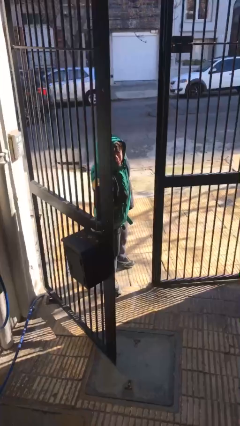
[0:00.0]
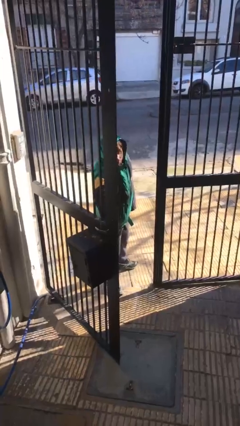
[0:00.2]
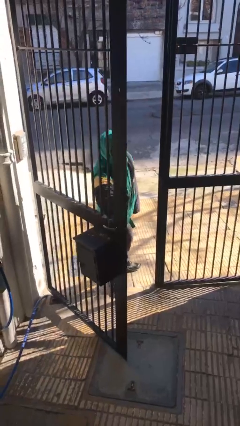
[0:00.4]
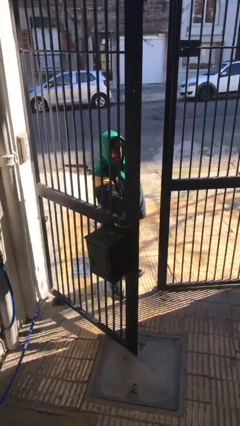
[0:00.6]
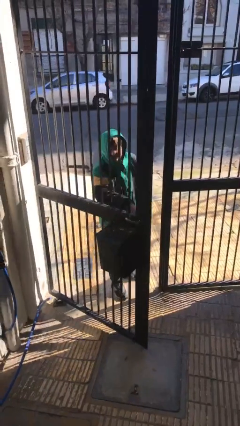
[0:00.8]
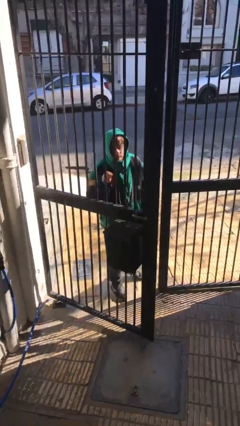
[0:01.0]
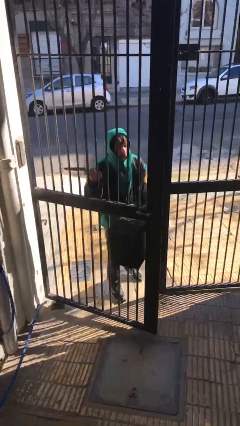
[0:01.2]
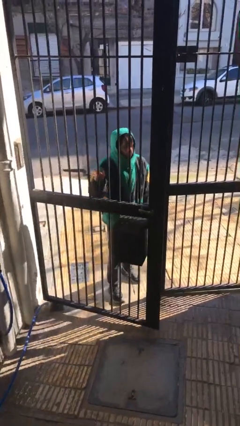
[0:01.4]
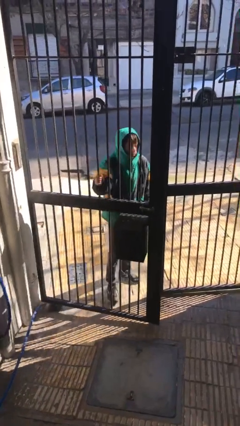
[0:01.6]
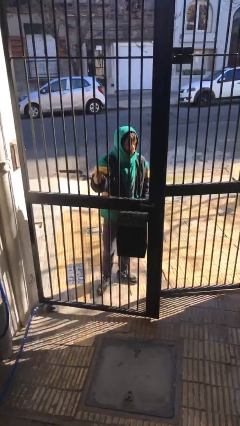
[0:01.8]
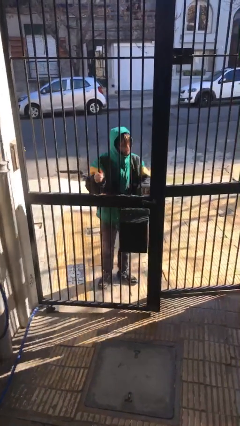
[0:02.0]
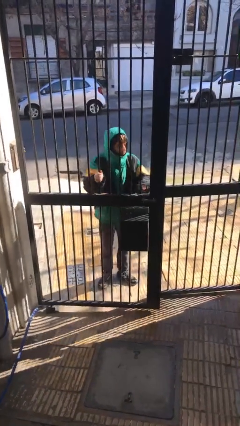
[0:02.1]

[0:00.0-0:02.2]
person closes gate

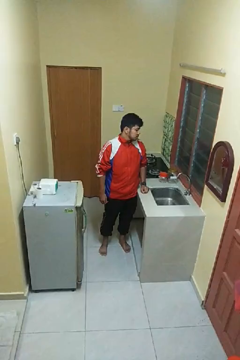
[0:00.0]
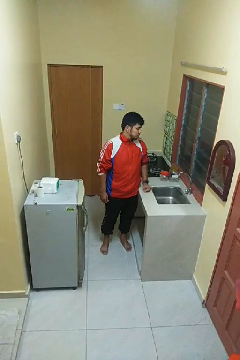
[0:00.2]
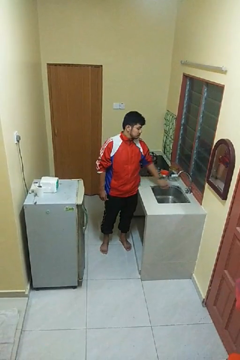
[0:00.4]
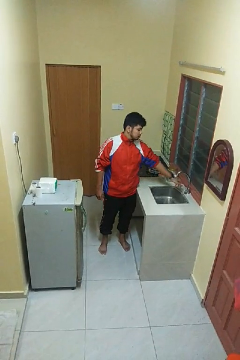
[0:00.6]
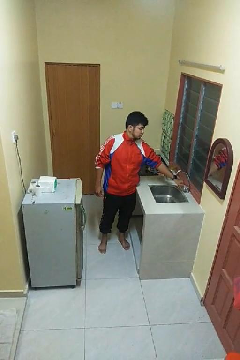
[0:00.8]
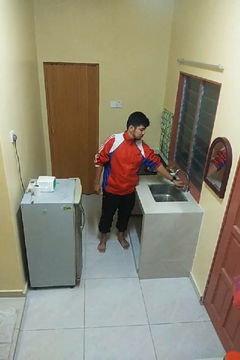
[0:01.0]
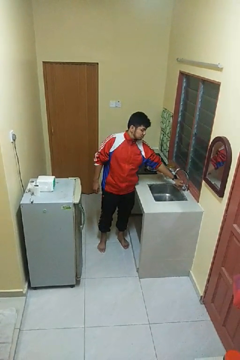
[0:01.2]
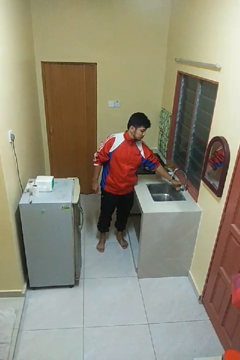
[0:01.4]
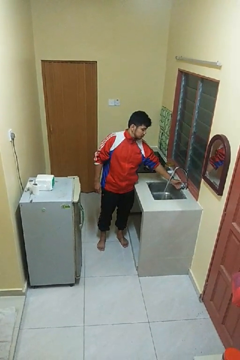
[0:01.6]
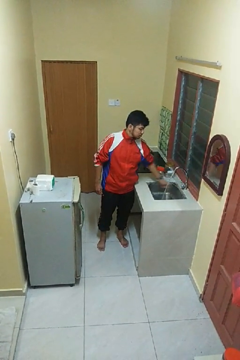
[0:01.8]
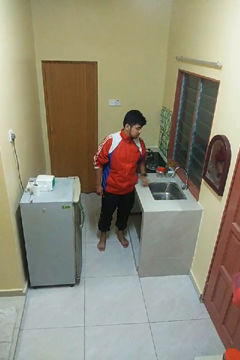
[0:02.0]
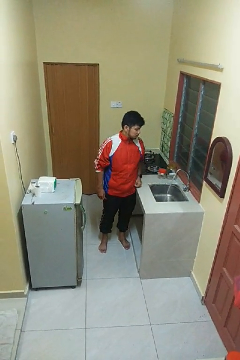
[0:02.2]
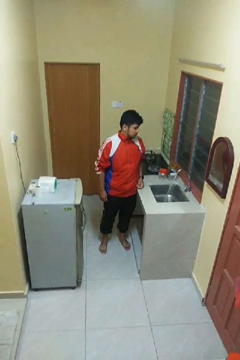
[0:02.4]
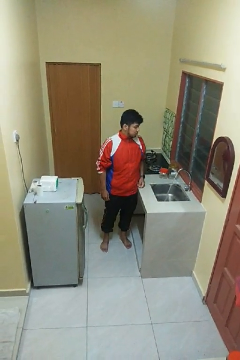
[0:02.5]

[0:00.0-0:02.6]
person turns on faucet

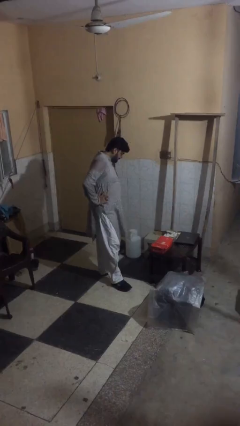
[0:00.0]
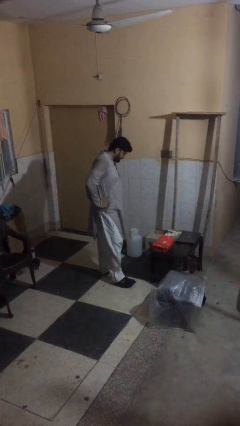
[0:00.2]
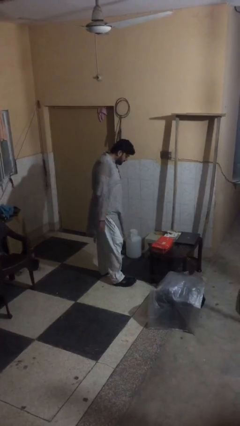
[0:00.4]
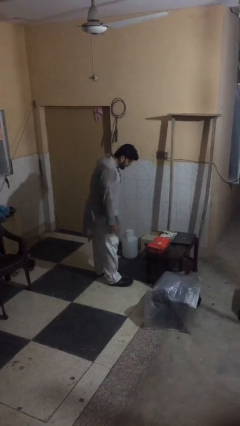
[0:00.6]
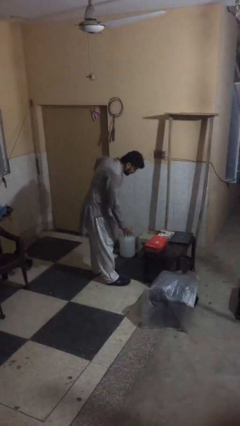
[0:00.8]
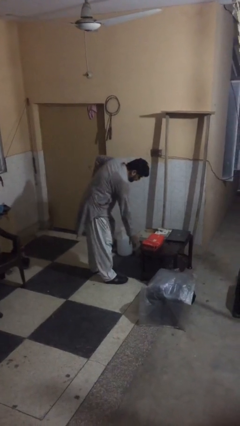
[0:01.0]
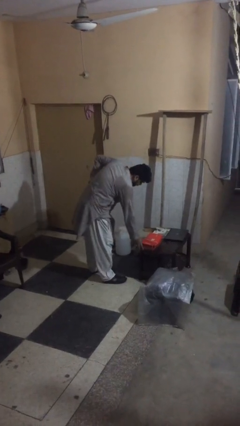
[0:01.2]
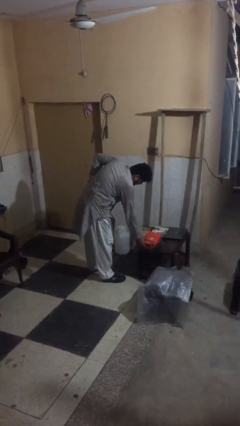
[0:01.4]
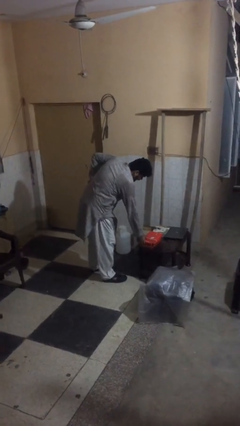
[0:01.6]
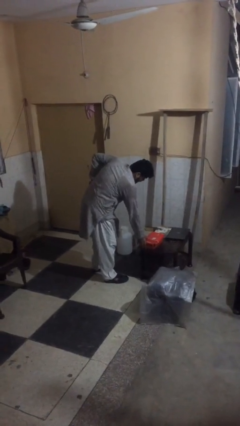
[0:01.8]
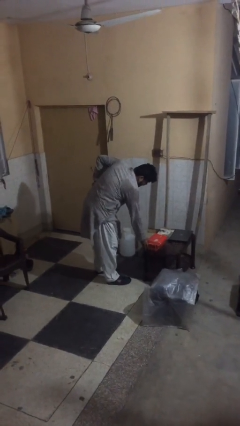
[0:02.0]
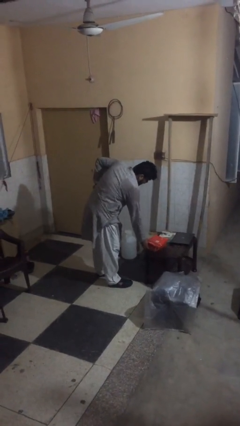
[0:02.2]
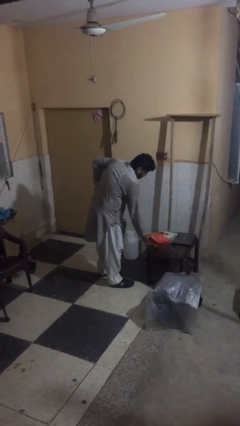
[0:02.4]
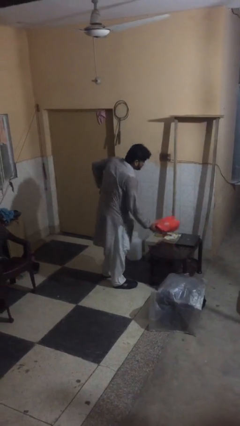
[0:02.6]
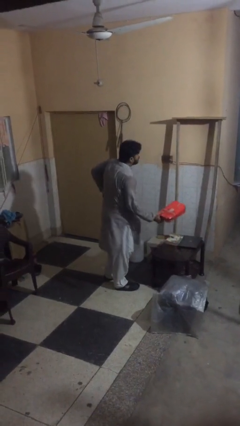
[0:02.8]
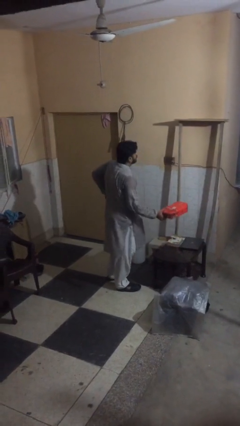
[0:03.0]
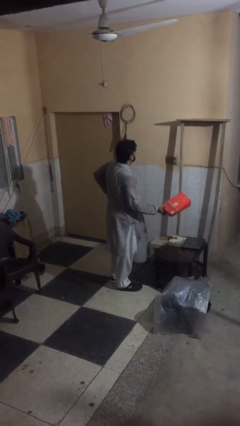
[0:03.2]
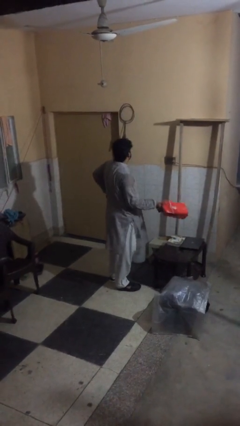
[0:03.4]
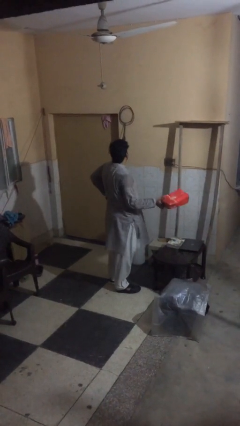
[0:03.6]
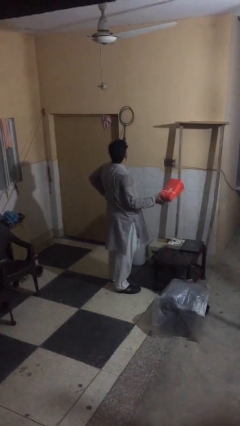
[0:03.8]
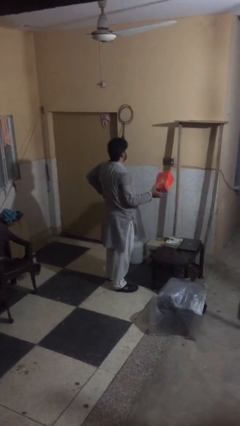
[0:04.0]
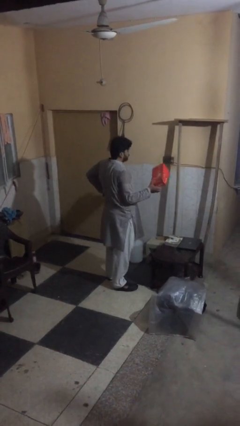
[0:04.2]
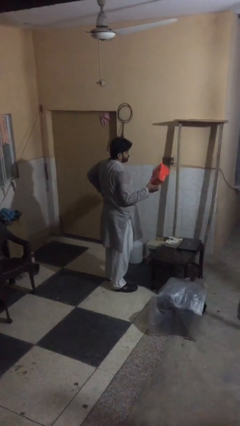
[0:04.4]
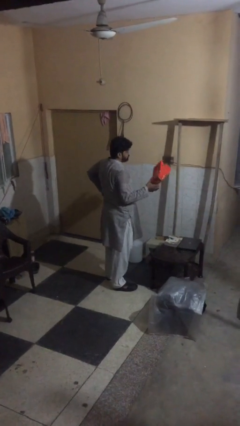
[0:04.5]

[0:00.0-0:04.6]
person picks up object from table

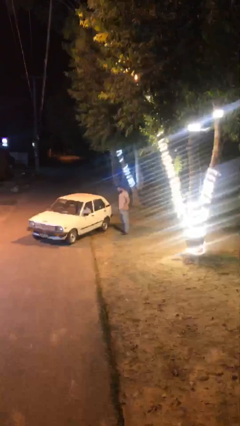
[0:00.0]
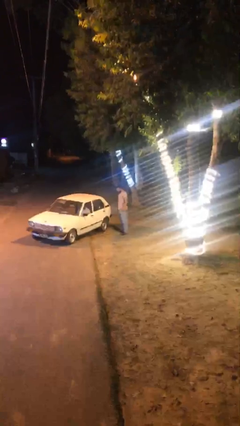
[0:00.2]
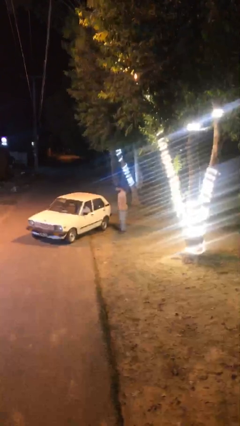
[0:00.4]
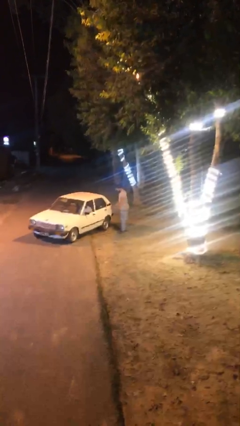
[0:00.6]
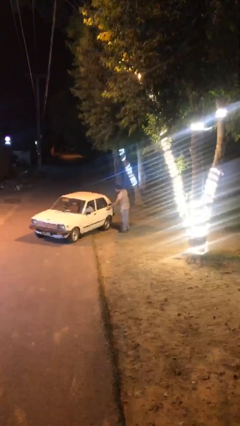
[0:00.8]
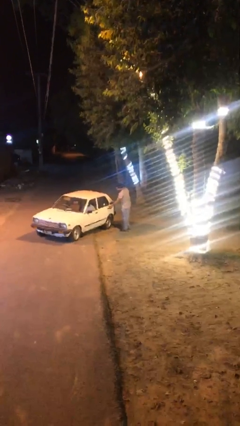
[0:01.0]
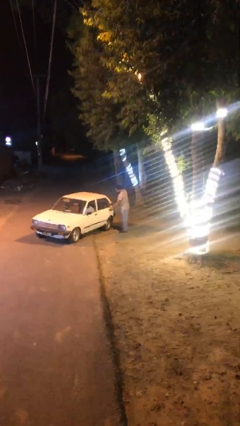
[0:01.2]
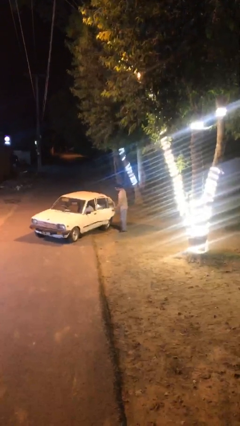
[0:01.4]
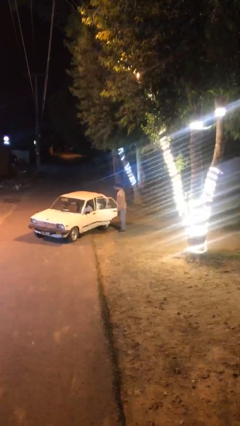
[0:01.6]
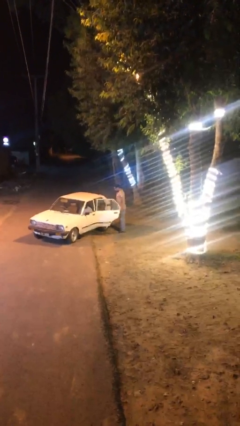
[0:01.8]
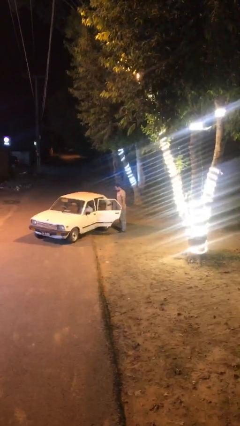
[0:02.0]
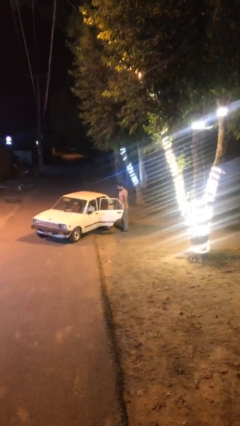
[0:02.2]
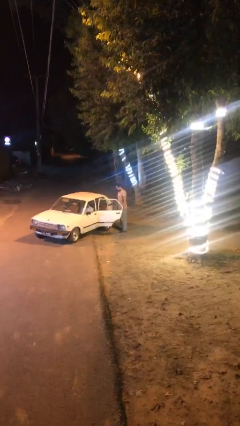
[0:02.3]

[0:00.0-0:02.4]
person opens car door

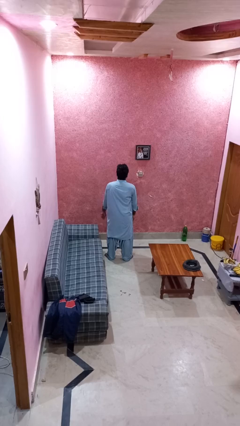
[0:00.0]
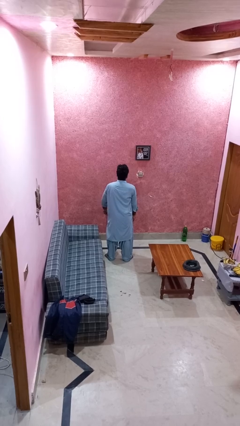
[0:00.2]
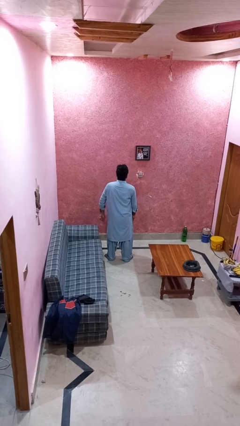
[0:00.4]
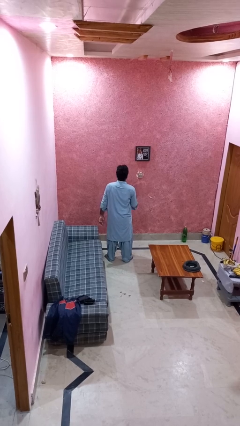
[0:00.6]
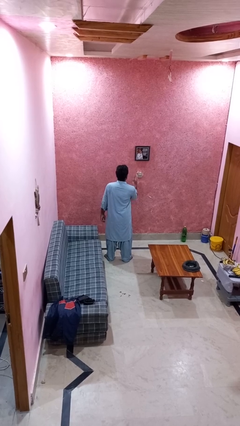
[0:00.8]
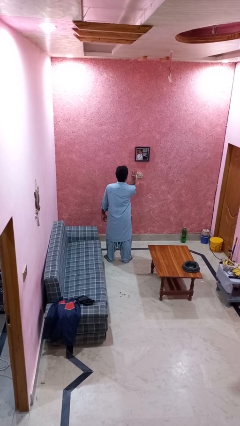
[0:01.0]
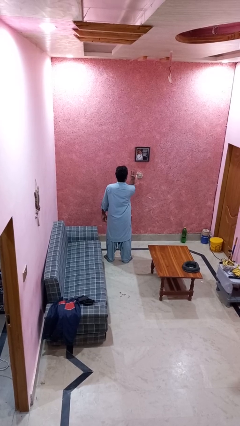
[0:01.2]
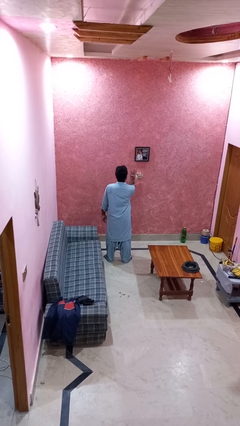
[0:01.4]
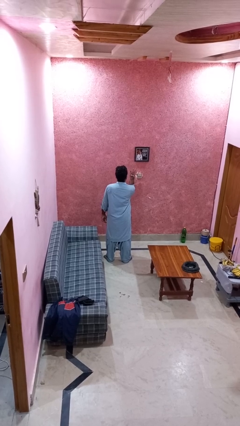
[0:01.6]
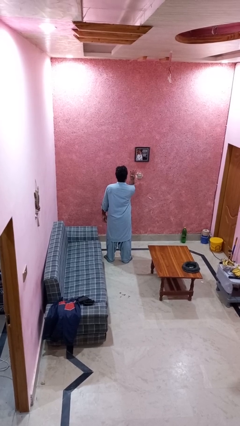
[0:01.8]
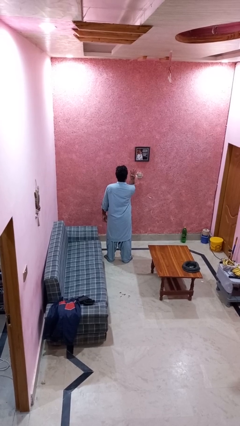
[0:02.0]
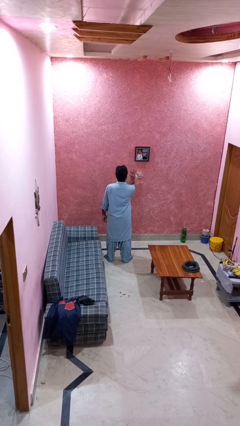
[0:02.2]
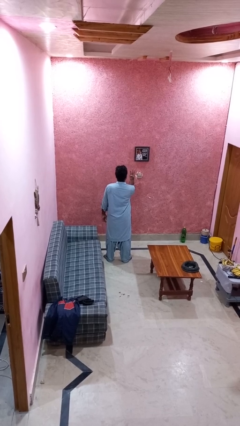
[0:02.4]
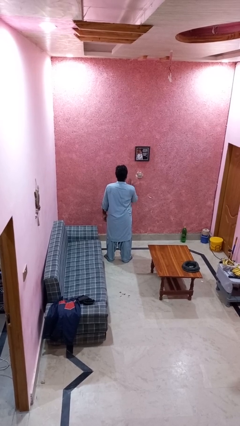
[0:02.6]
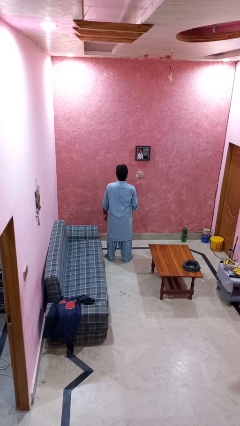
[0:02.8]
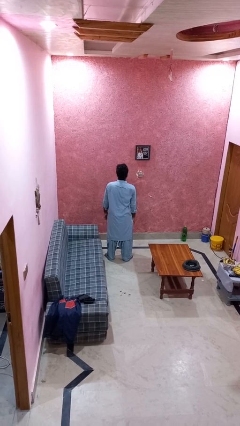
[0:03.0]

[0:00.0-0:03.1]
person gestures number three

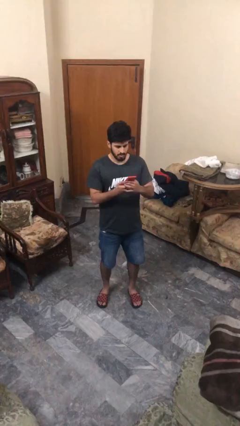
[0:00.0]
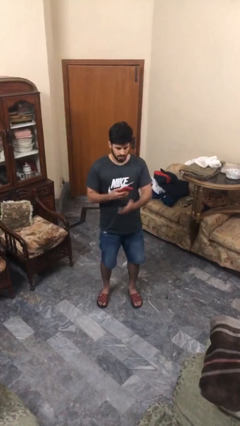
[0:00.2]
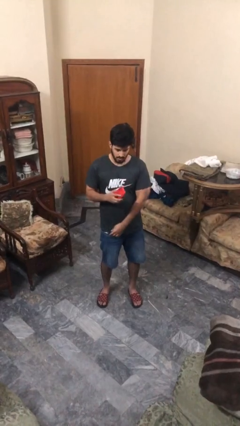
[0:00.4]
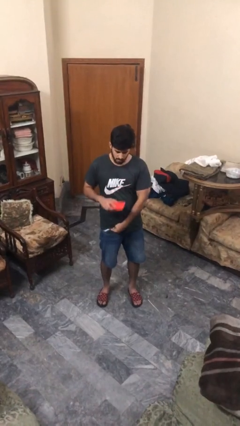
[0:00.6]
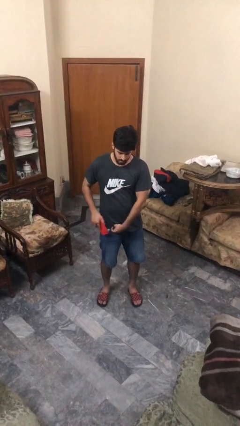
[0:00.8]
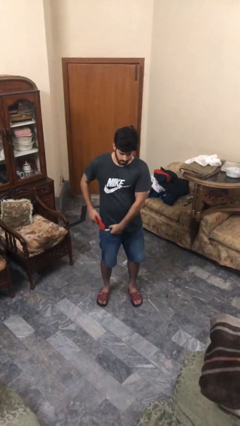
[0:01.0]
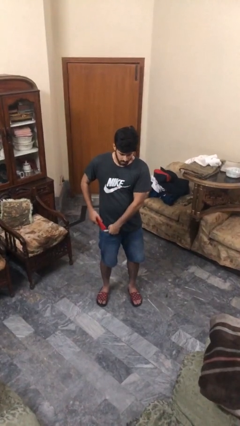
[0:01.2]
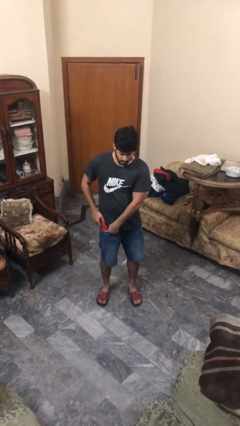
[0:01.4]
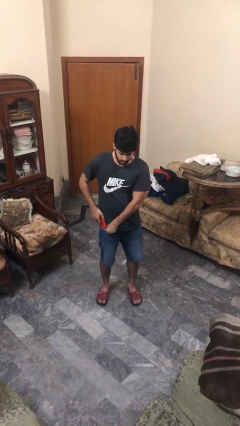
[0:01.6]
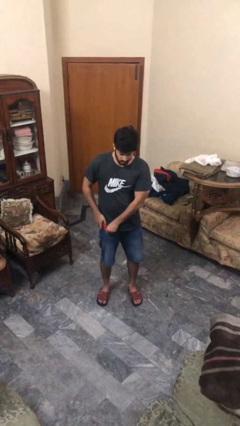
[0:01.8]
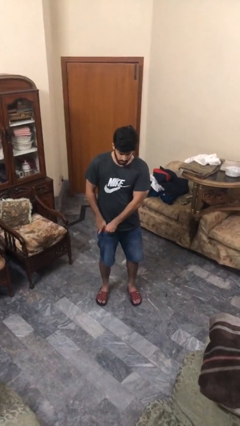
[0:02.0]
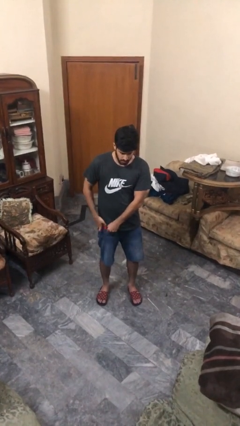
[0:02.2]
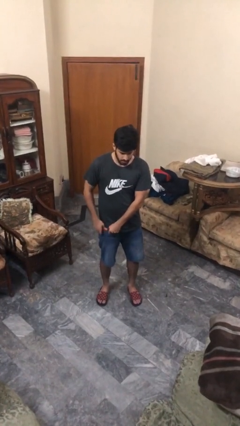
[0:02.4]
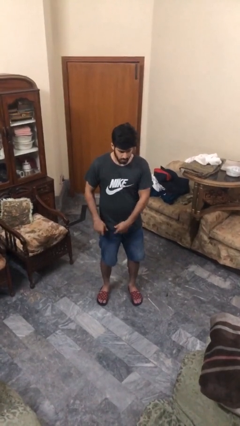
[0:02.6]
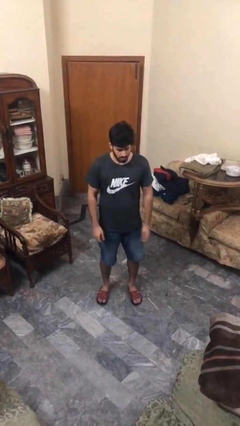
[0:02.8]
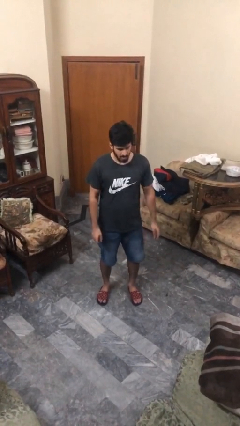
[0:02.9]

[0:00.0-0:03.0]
person puts phone into pocket
